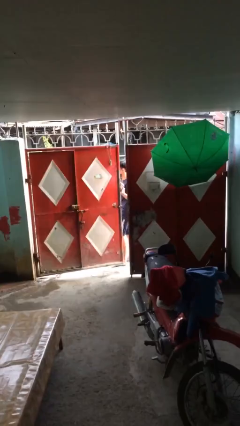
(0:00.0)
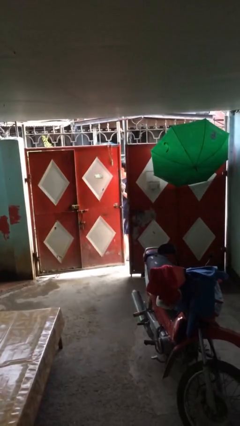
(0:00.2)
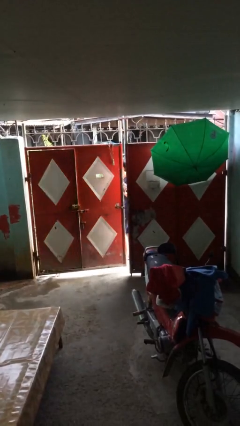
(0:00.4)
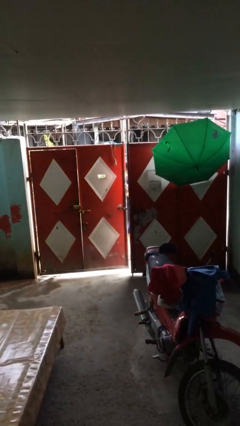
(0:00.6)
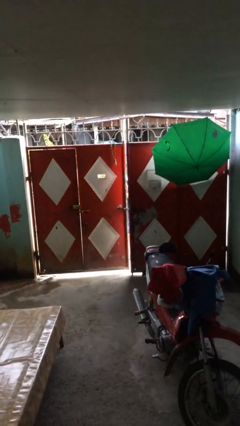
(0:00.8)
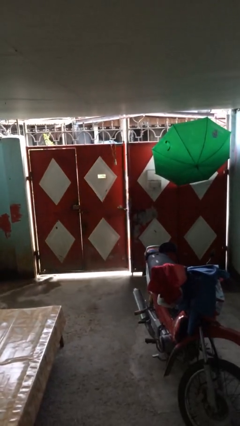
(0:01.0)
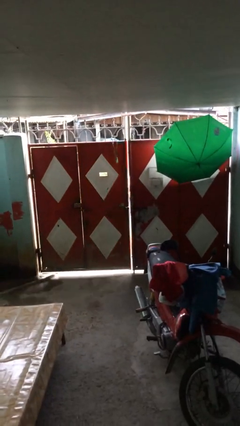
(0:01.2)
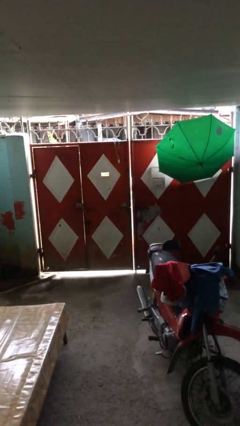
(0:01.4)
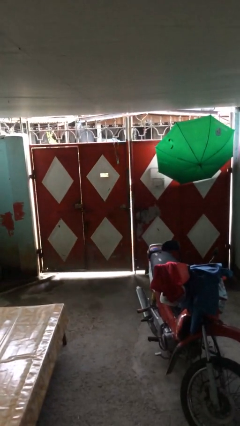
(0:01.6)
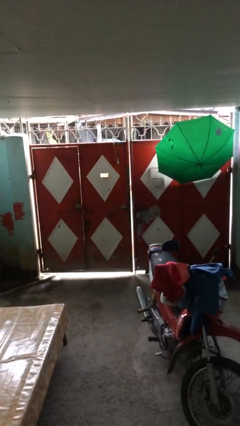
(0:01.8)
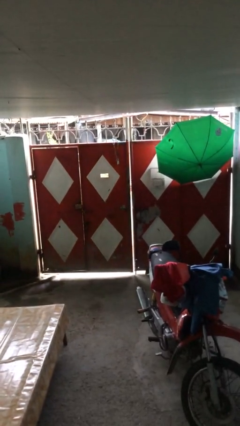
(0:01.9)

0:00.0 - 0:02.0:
person closes facility door

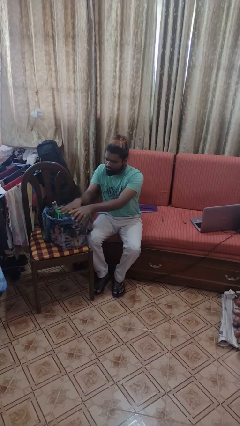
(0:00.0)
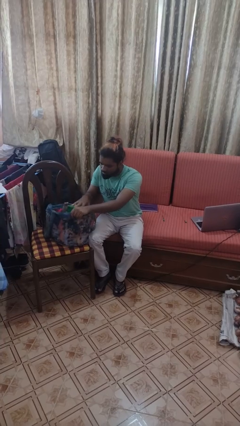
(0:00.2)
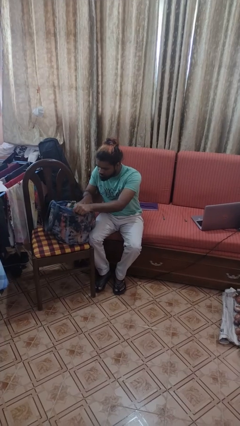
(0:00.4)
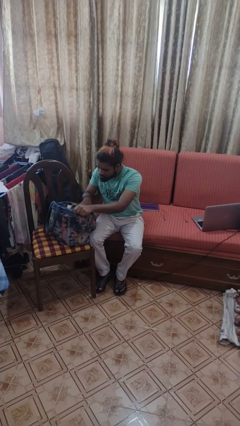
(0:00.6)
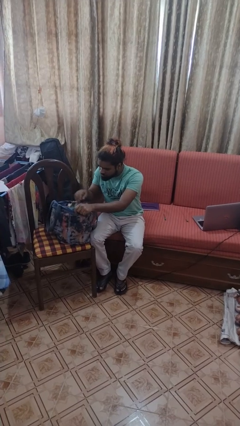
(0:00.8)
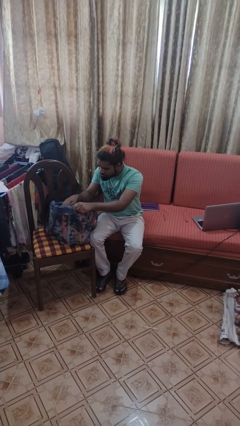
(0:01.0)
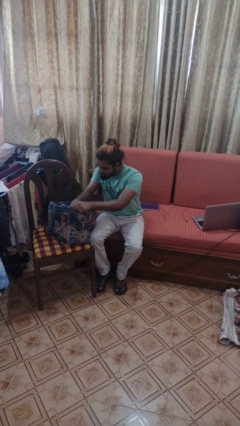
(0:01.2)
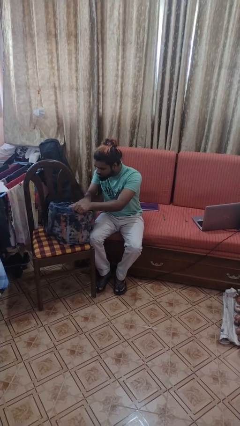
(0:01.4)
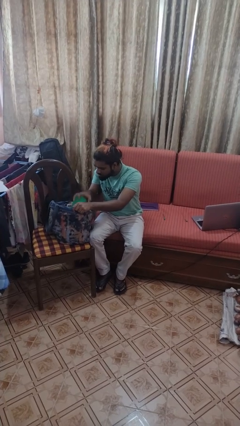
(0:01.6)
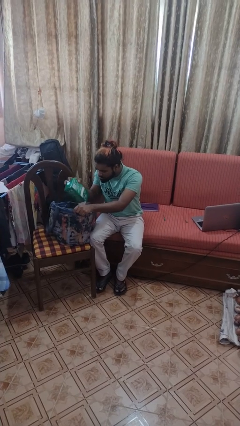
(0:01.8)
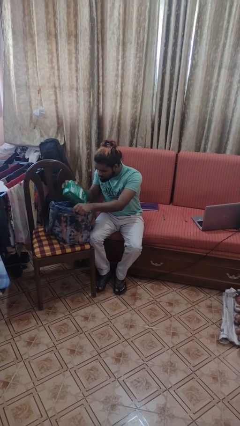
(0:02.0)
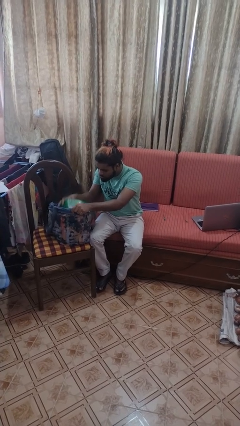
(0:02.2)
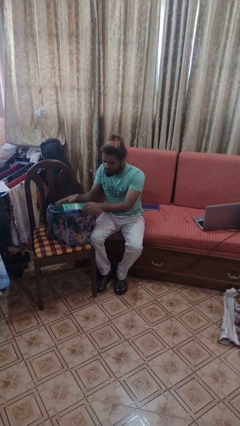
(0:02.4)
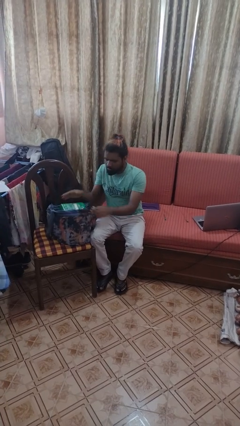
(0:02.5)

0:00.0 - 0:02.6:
person searches in bag

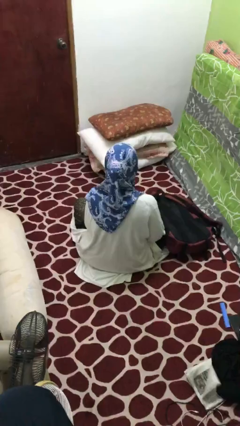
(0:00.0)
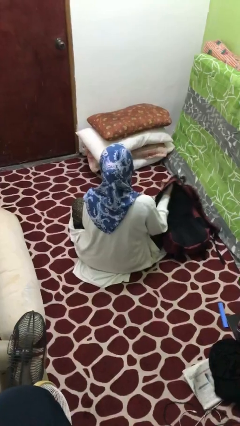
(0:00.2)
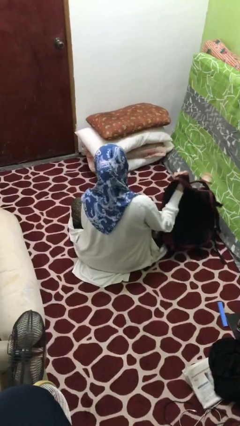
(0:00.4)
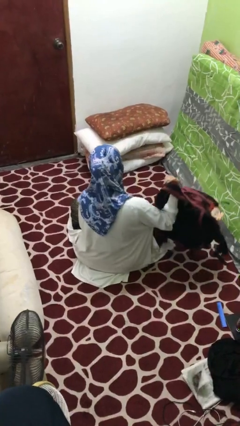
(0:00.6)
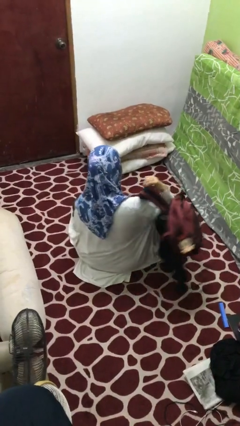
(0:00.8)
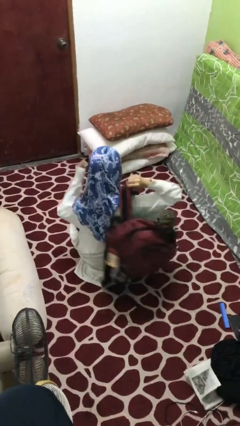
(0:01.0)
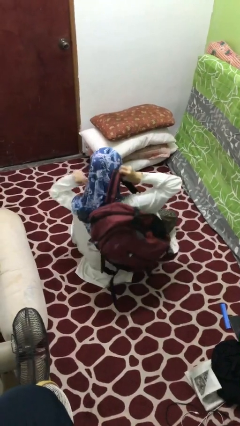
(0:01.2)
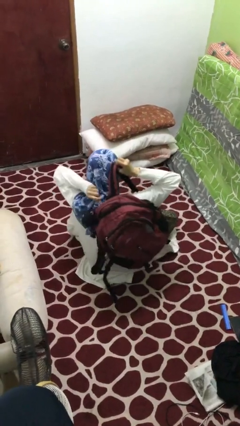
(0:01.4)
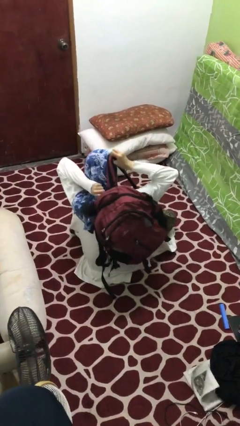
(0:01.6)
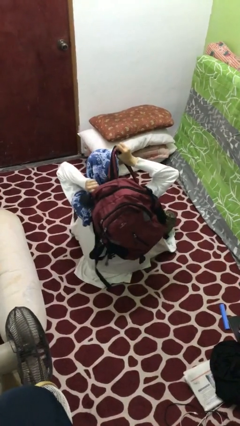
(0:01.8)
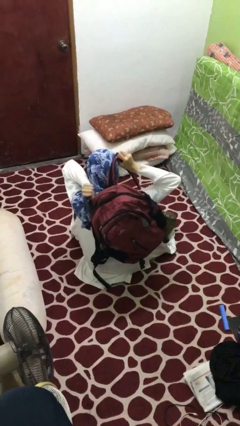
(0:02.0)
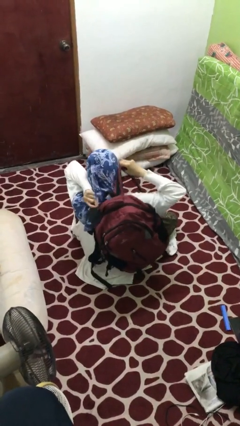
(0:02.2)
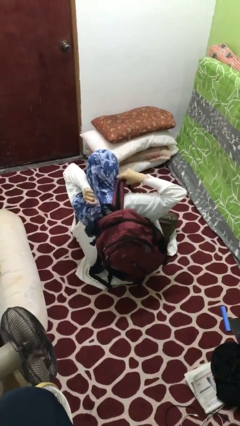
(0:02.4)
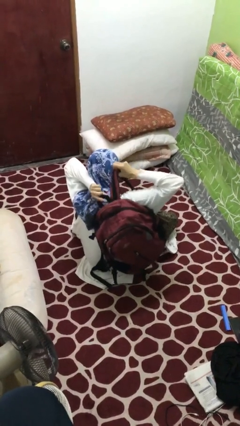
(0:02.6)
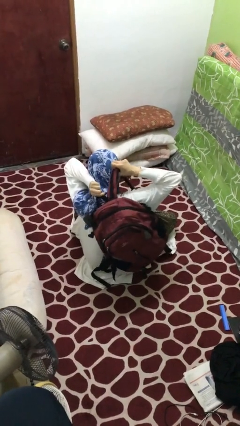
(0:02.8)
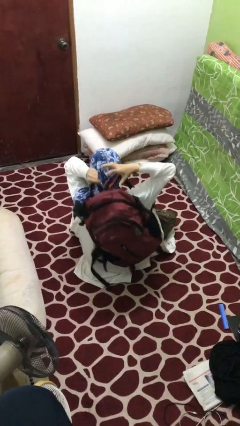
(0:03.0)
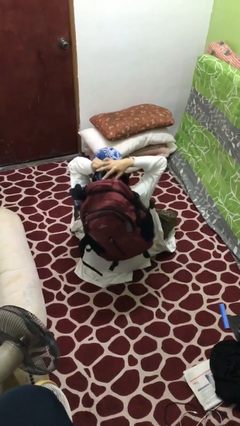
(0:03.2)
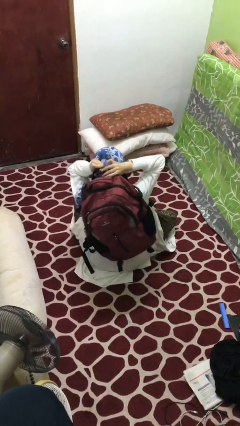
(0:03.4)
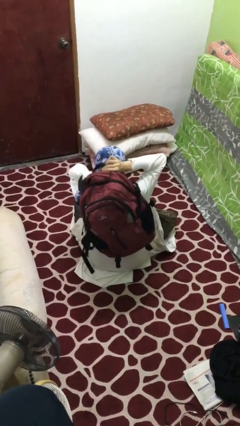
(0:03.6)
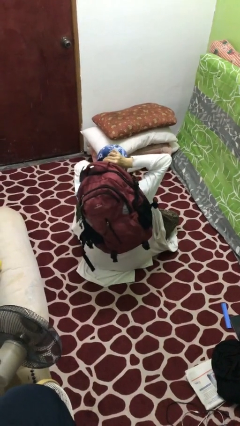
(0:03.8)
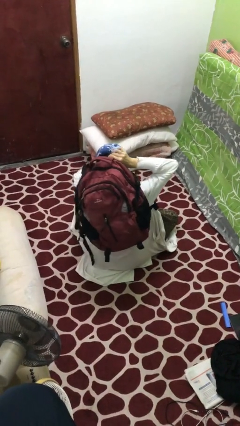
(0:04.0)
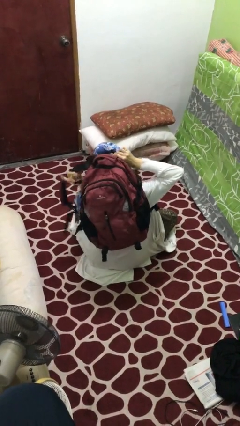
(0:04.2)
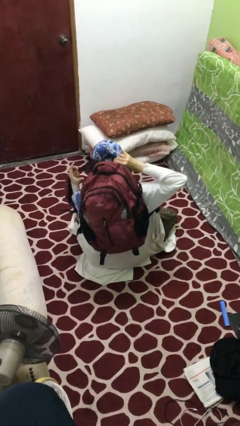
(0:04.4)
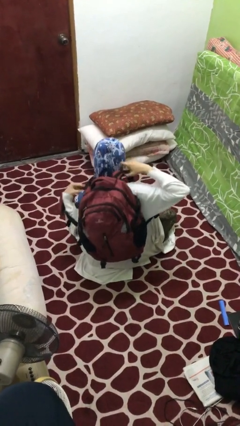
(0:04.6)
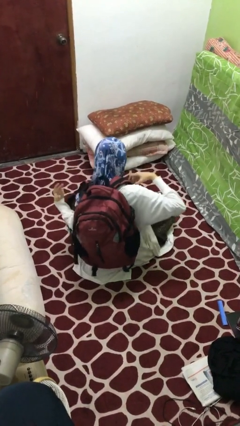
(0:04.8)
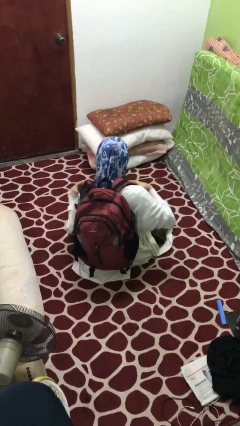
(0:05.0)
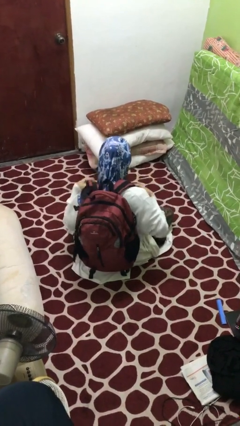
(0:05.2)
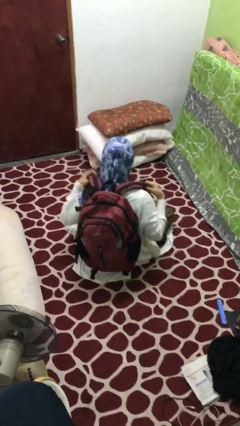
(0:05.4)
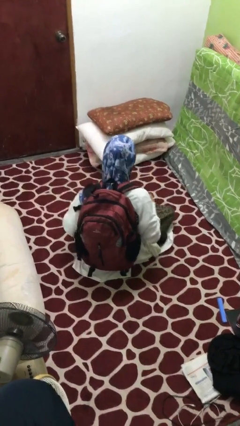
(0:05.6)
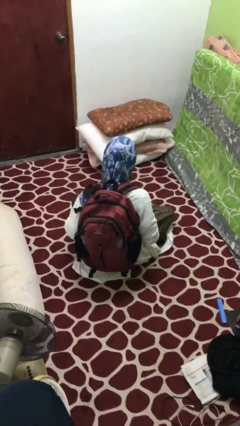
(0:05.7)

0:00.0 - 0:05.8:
person puts on backpack

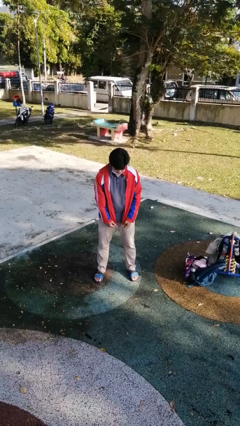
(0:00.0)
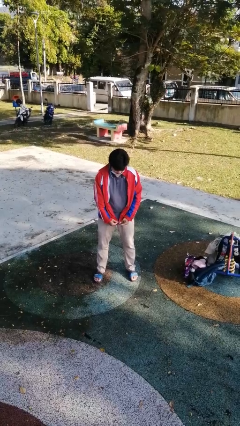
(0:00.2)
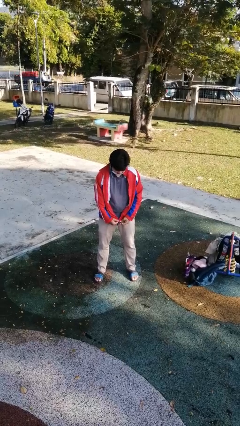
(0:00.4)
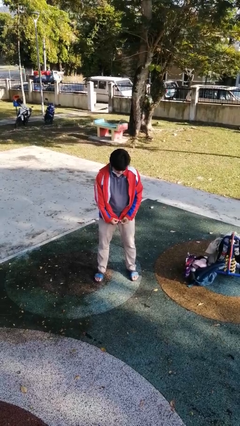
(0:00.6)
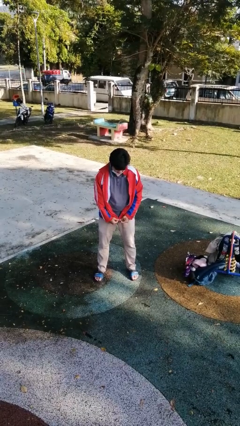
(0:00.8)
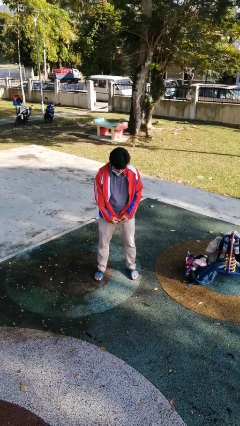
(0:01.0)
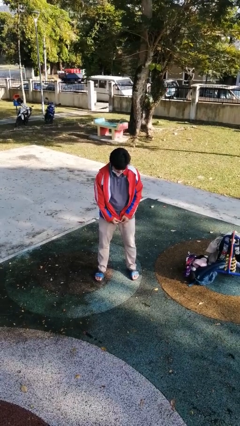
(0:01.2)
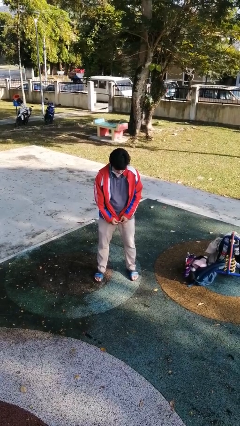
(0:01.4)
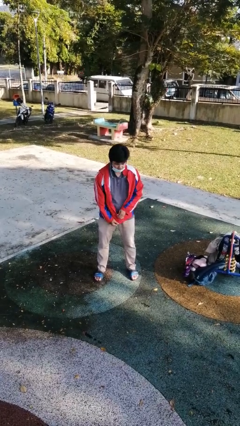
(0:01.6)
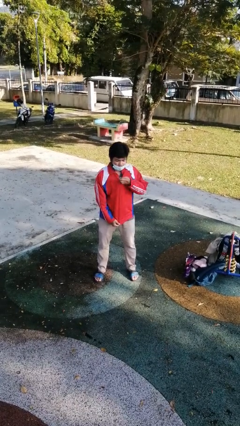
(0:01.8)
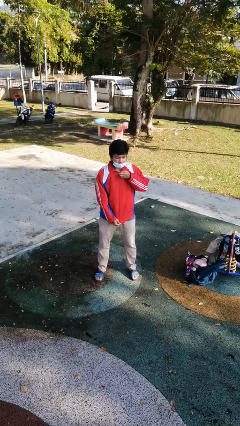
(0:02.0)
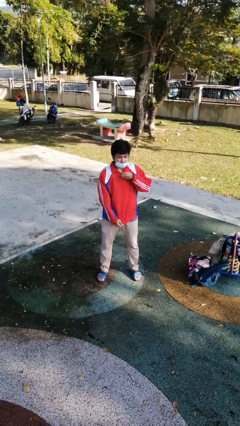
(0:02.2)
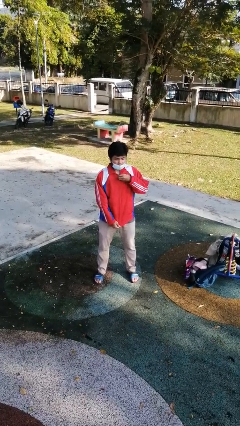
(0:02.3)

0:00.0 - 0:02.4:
person zips up jacket

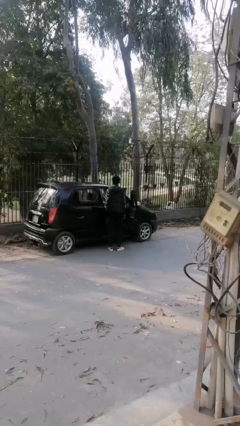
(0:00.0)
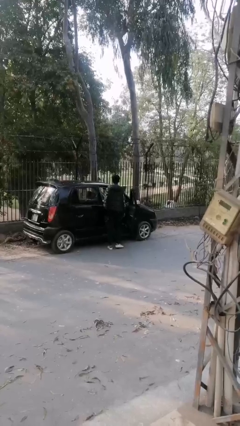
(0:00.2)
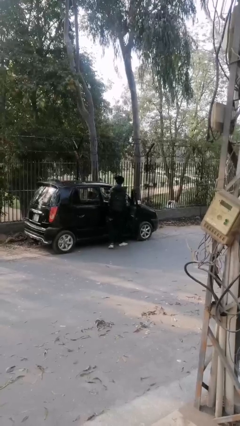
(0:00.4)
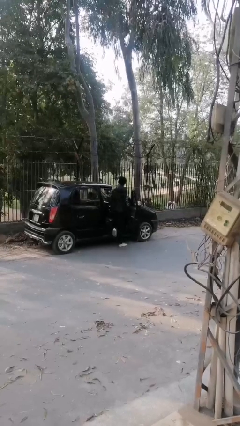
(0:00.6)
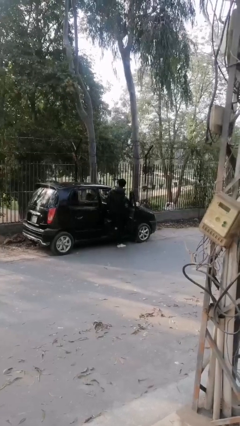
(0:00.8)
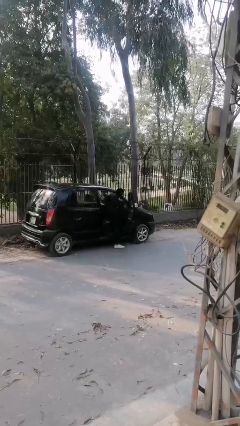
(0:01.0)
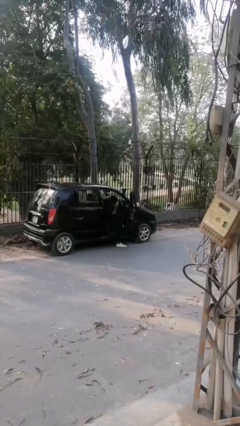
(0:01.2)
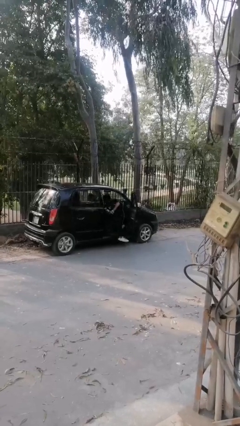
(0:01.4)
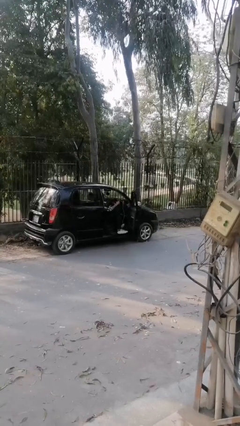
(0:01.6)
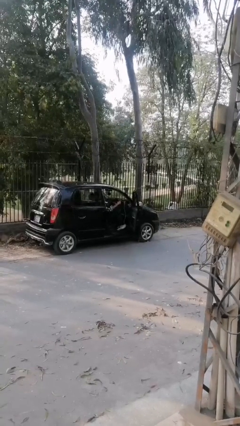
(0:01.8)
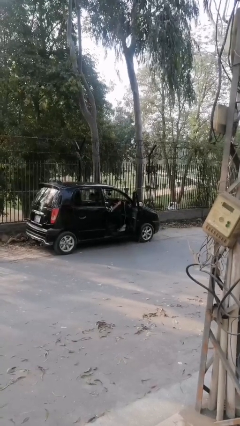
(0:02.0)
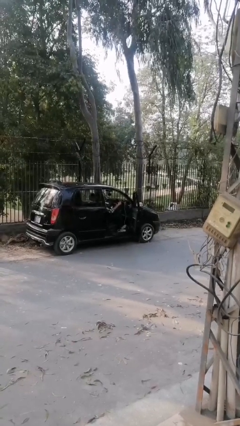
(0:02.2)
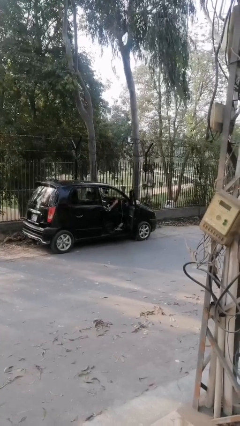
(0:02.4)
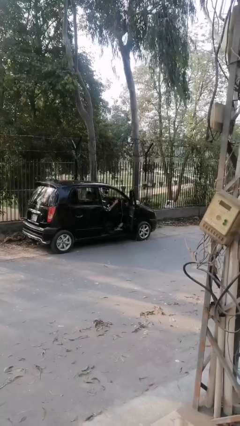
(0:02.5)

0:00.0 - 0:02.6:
person enters car

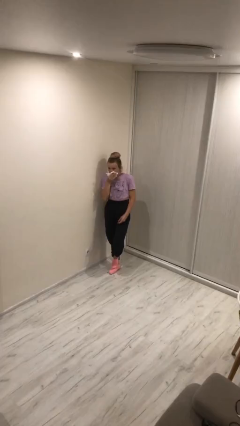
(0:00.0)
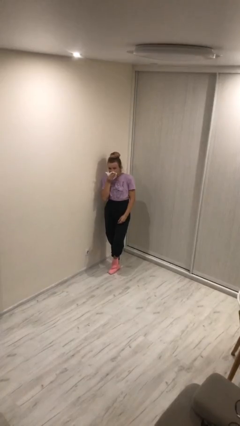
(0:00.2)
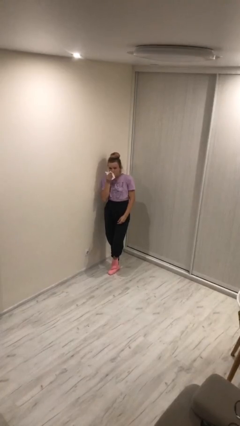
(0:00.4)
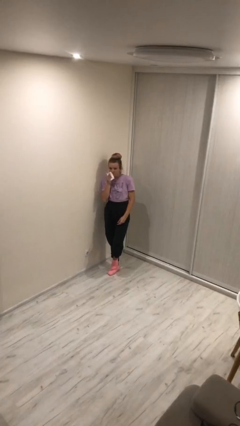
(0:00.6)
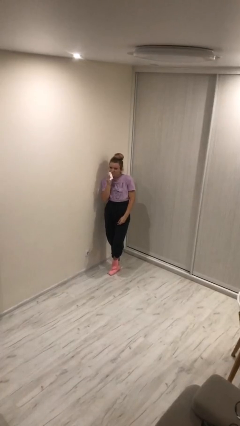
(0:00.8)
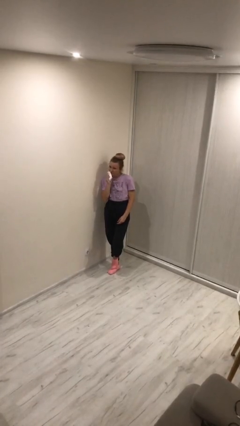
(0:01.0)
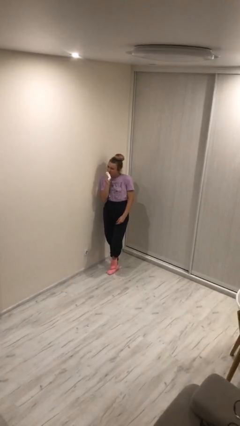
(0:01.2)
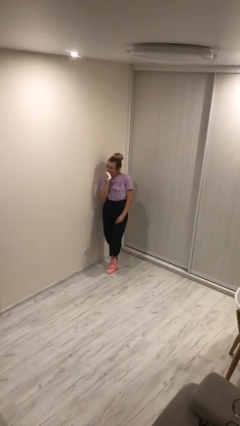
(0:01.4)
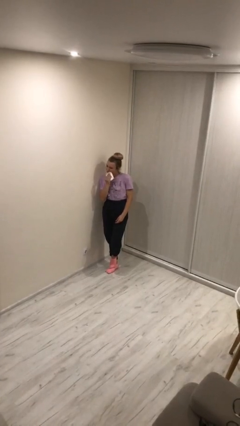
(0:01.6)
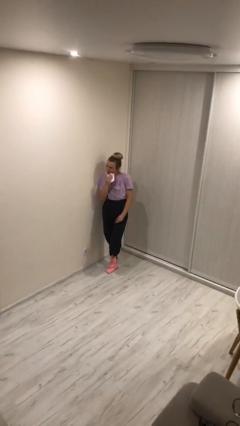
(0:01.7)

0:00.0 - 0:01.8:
person wipes mouth with napkin
